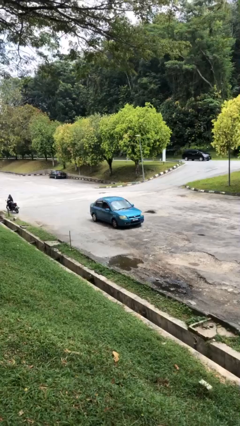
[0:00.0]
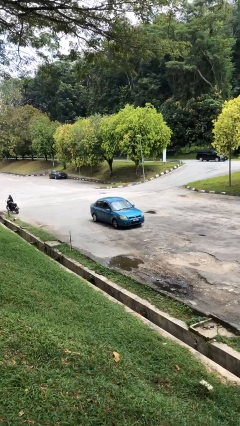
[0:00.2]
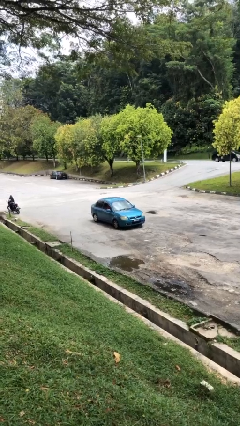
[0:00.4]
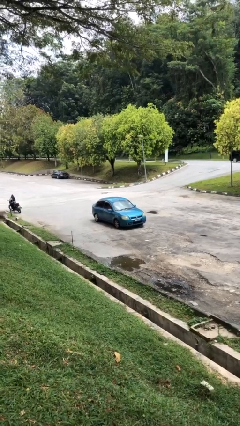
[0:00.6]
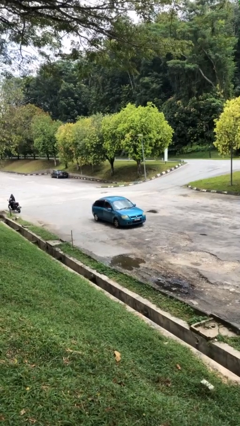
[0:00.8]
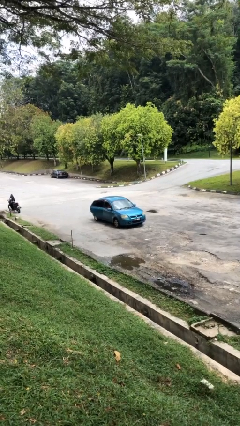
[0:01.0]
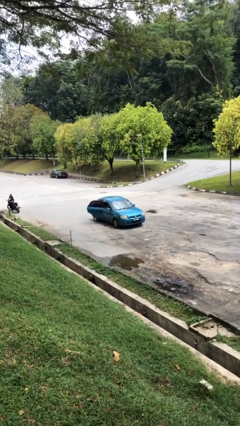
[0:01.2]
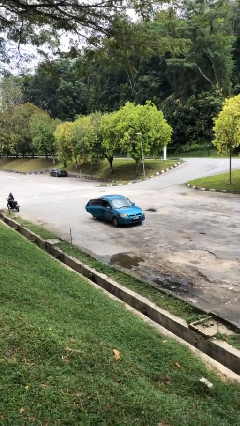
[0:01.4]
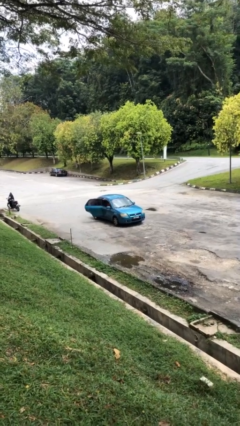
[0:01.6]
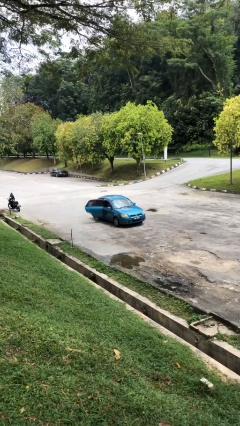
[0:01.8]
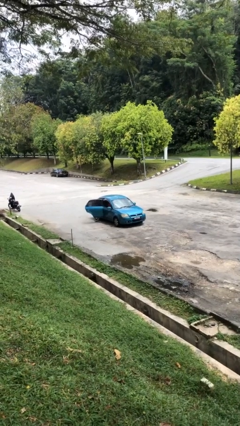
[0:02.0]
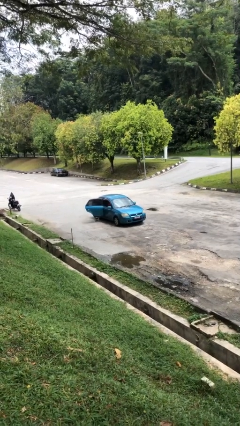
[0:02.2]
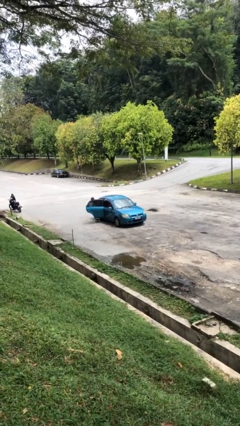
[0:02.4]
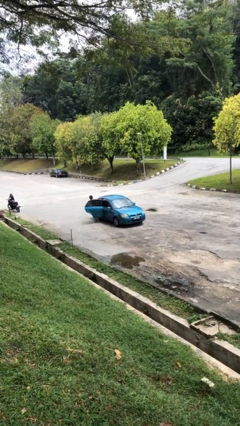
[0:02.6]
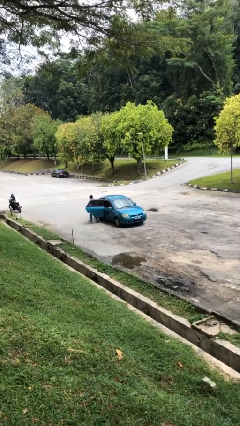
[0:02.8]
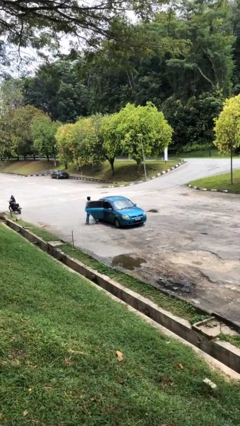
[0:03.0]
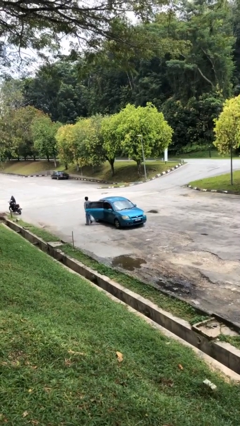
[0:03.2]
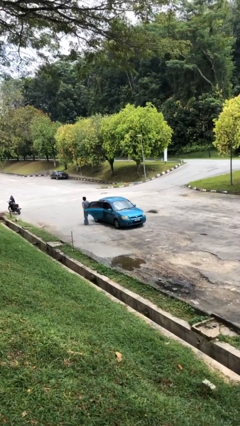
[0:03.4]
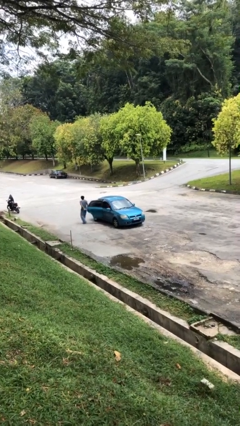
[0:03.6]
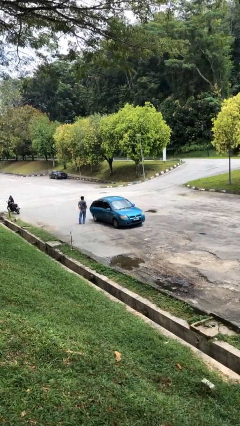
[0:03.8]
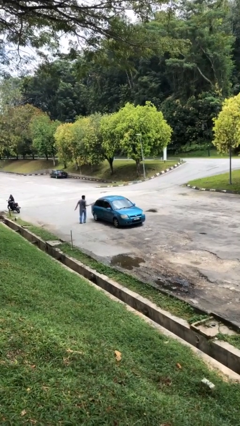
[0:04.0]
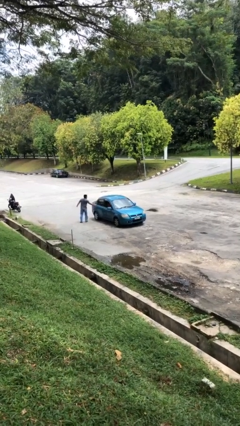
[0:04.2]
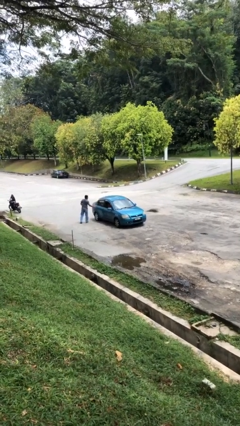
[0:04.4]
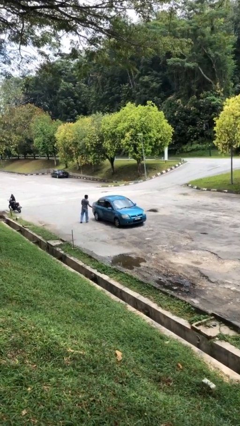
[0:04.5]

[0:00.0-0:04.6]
car drops off person

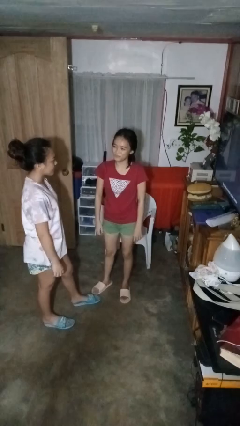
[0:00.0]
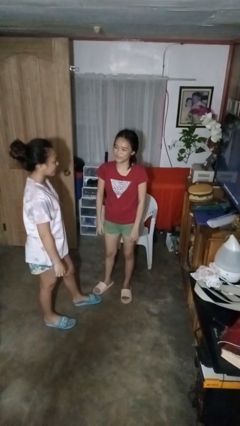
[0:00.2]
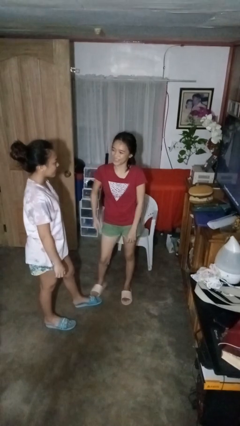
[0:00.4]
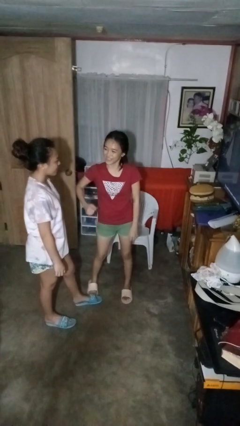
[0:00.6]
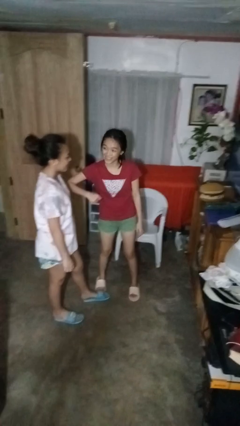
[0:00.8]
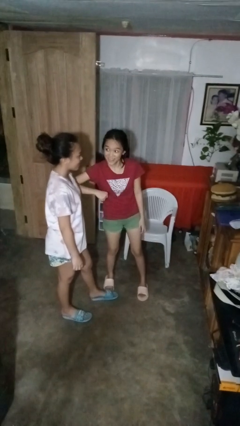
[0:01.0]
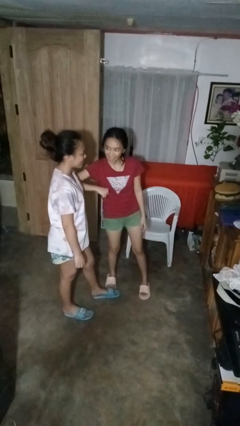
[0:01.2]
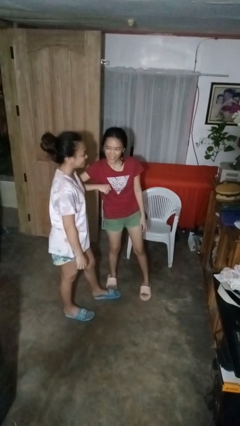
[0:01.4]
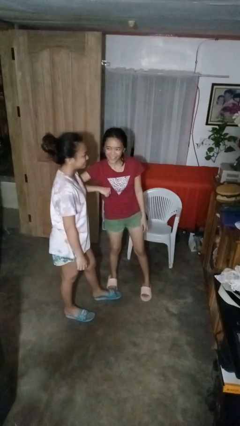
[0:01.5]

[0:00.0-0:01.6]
person nudges person with elbow

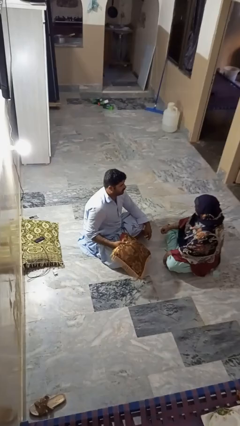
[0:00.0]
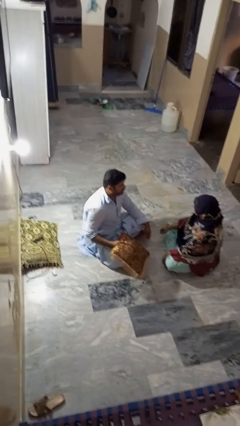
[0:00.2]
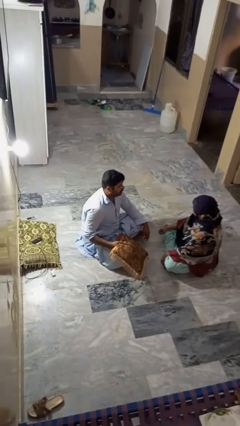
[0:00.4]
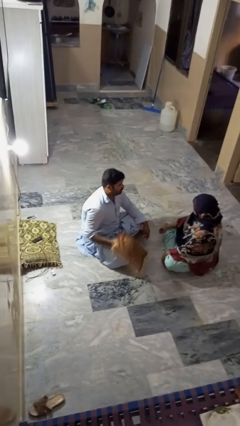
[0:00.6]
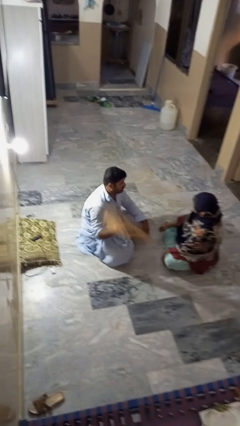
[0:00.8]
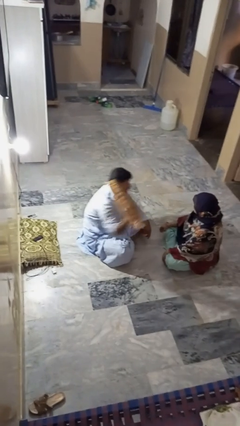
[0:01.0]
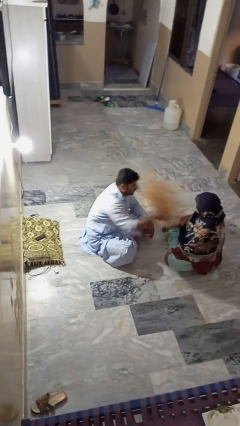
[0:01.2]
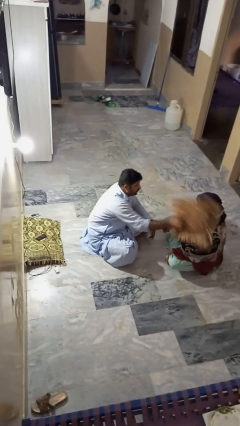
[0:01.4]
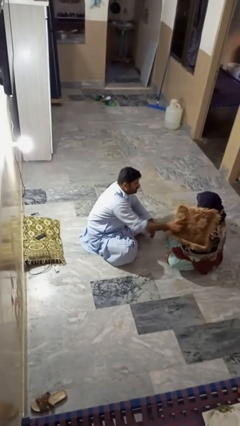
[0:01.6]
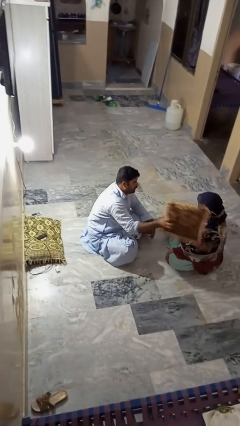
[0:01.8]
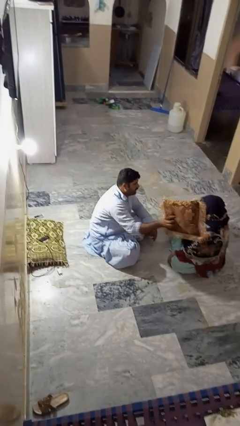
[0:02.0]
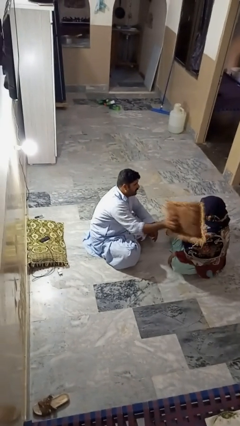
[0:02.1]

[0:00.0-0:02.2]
person hits person with pillow

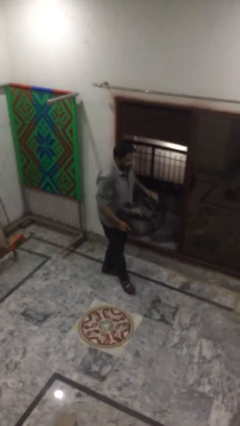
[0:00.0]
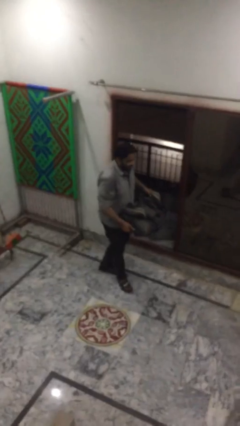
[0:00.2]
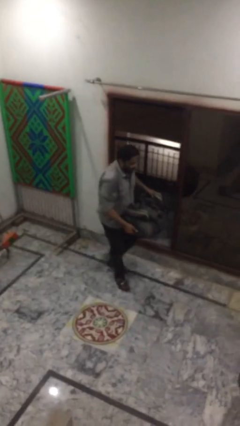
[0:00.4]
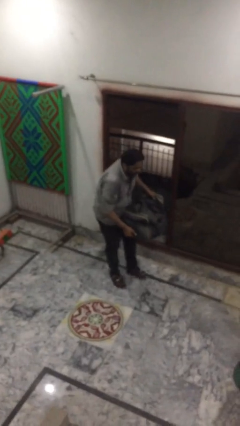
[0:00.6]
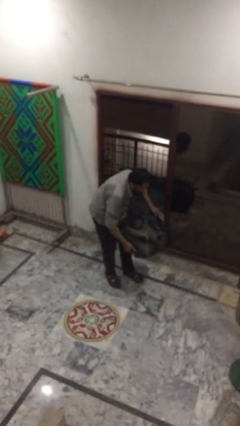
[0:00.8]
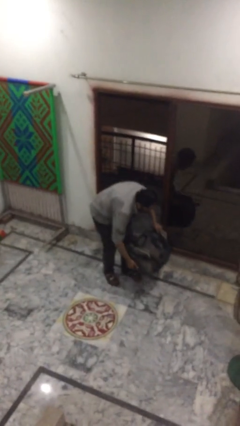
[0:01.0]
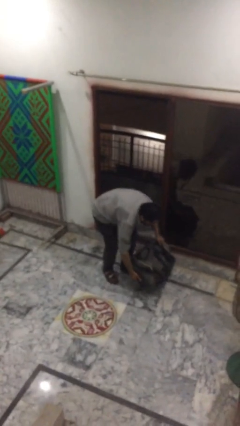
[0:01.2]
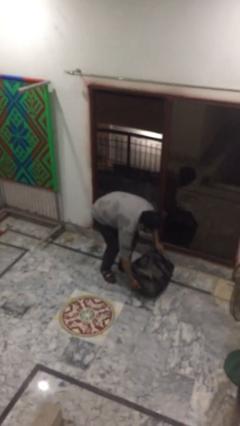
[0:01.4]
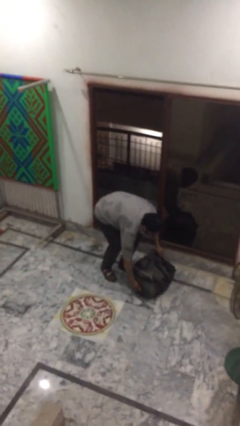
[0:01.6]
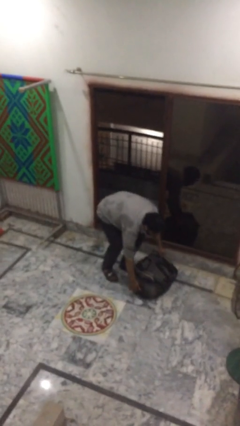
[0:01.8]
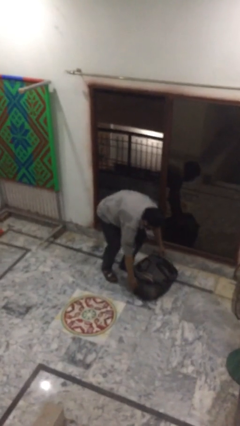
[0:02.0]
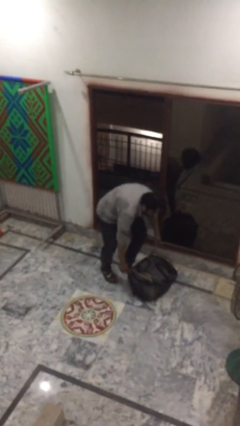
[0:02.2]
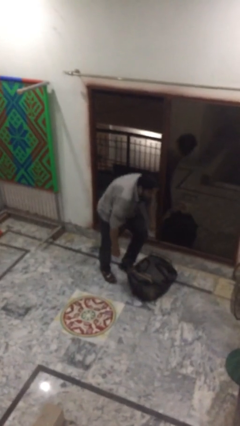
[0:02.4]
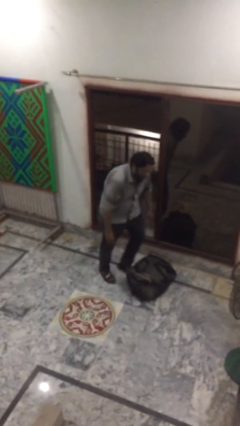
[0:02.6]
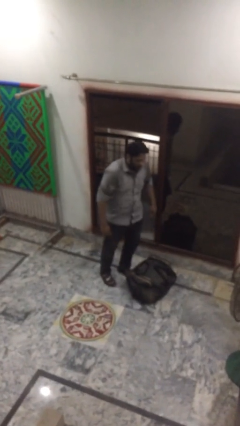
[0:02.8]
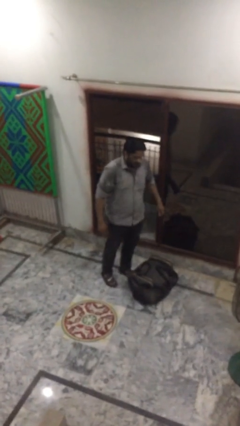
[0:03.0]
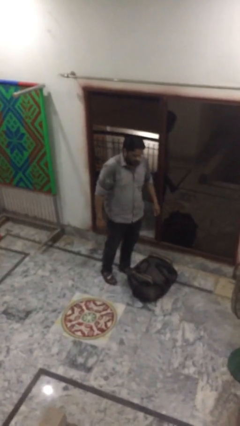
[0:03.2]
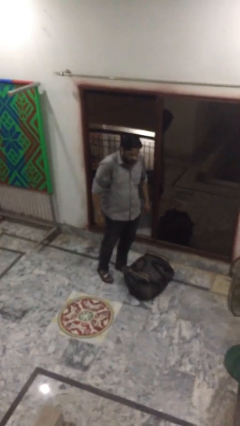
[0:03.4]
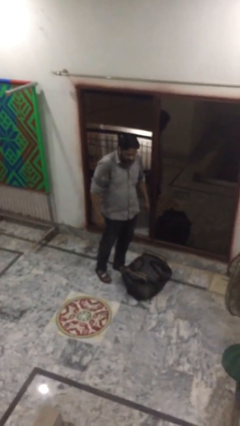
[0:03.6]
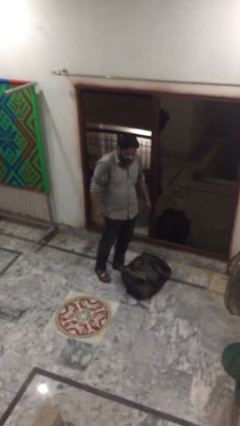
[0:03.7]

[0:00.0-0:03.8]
person puts down object on floor

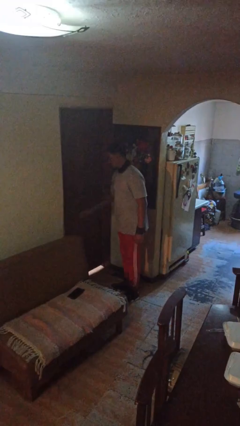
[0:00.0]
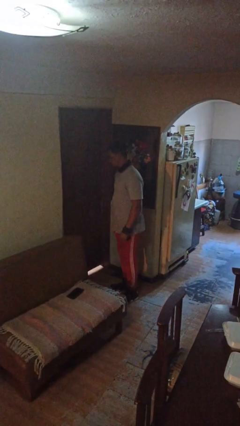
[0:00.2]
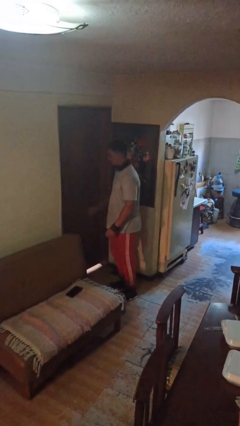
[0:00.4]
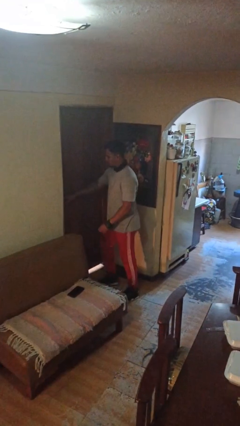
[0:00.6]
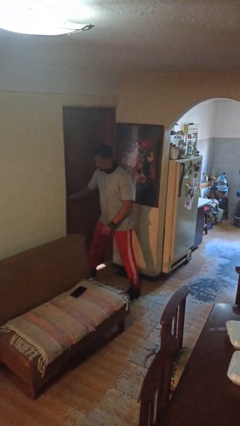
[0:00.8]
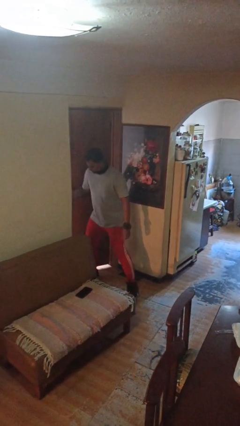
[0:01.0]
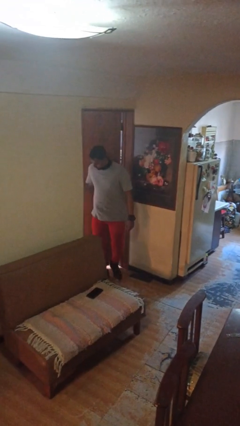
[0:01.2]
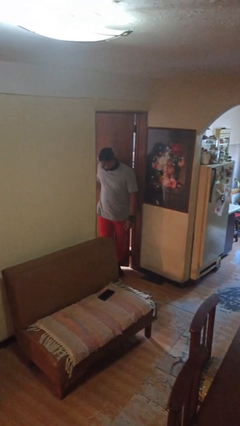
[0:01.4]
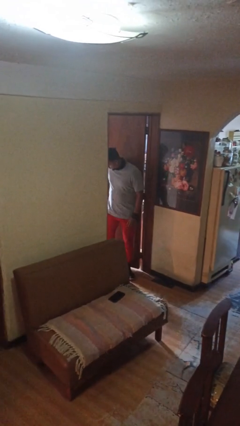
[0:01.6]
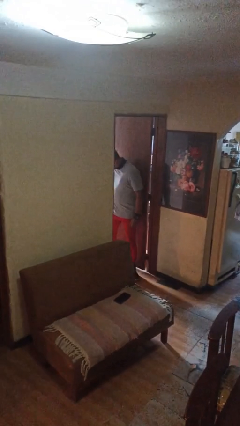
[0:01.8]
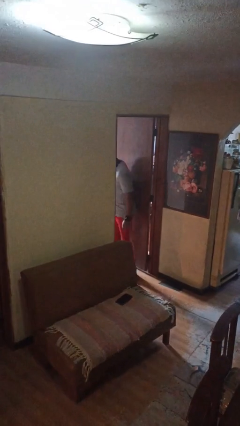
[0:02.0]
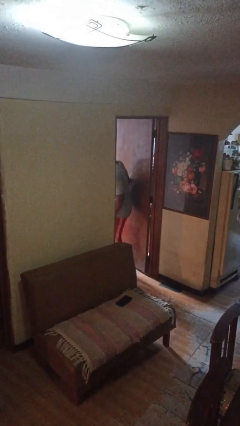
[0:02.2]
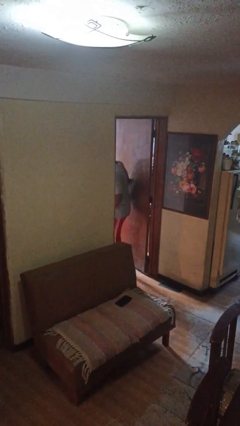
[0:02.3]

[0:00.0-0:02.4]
person opens facility door

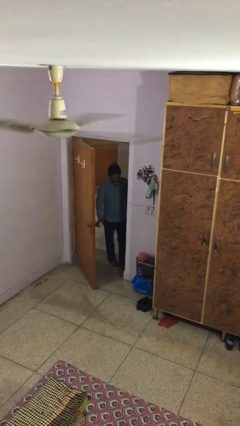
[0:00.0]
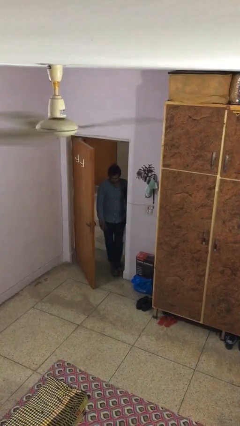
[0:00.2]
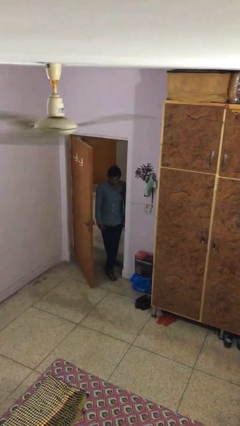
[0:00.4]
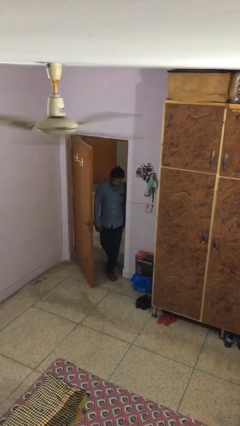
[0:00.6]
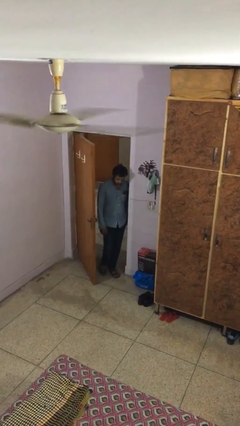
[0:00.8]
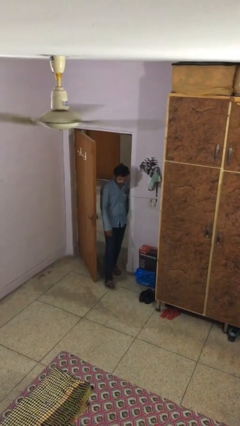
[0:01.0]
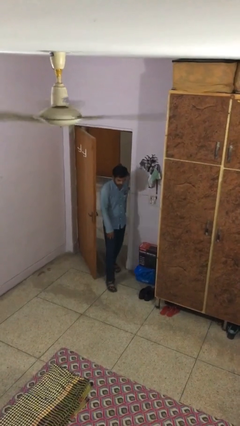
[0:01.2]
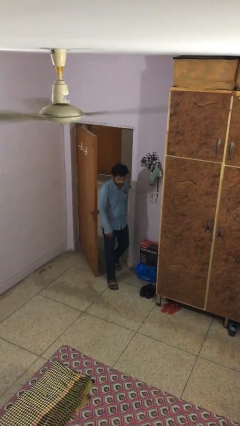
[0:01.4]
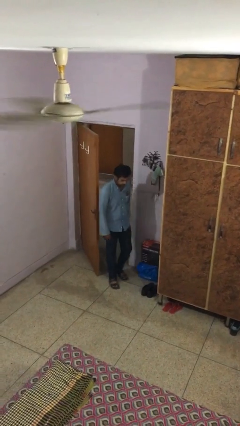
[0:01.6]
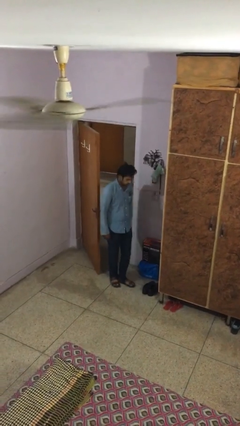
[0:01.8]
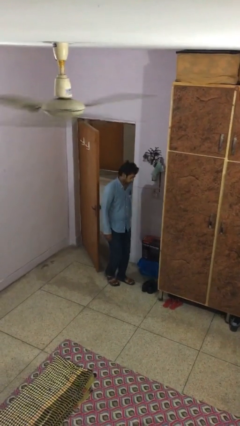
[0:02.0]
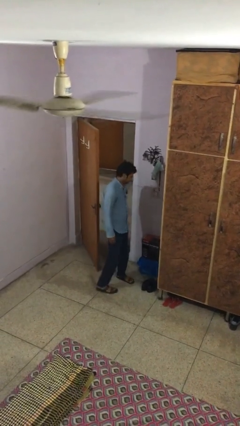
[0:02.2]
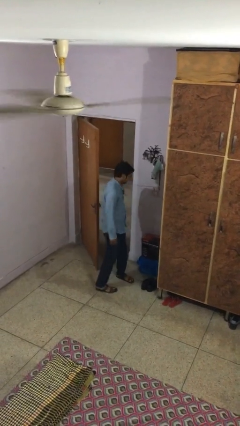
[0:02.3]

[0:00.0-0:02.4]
person enters scene through structure
